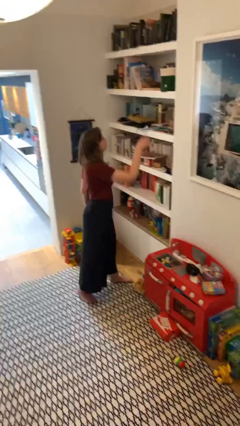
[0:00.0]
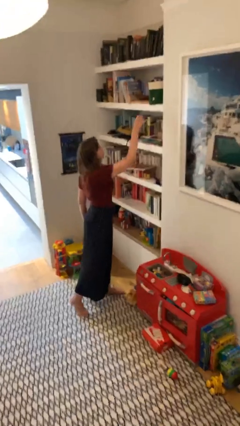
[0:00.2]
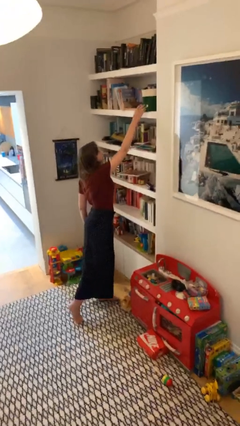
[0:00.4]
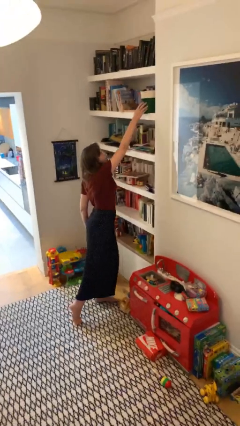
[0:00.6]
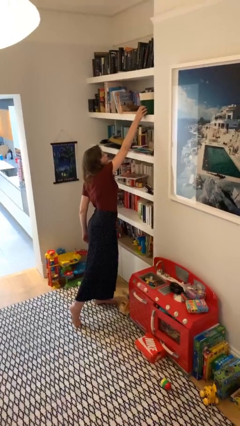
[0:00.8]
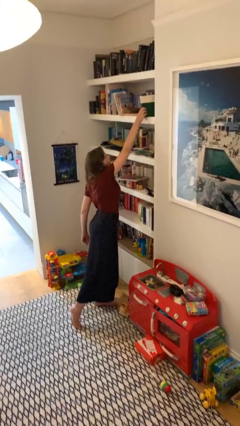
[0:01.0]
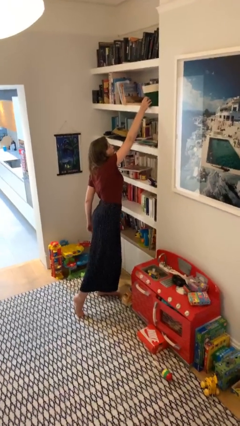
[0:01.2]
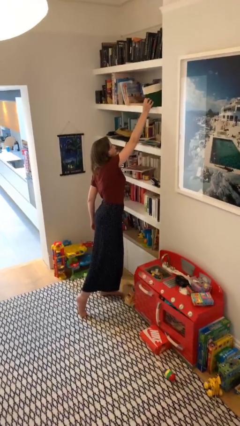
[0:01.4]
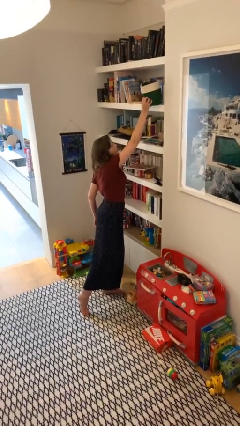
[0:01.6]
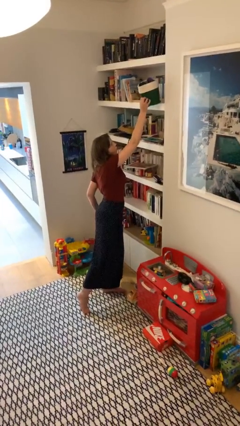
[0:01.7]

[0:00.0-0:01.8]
person picks up object from shelf

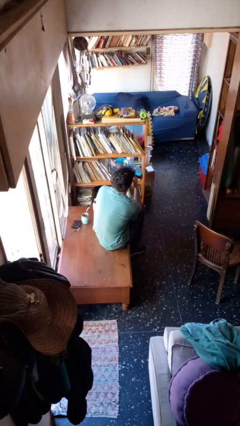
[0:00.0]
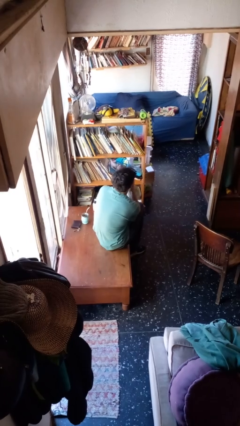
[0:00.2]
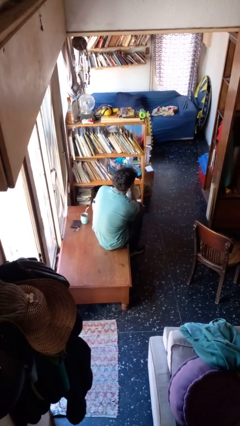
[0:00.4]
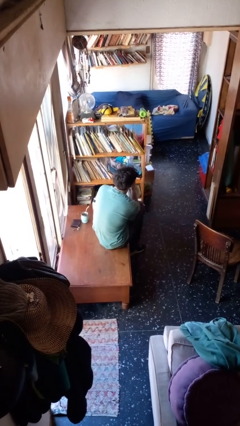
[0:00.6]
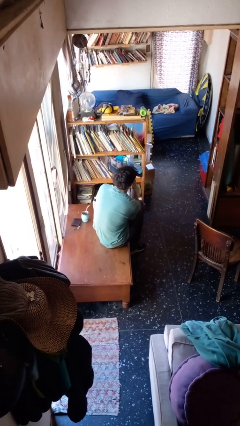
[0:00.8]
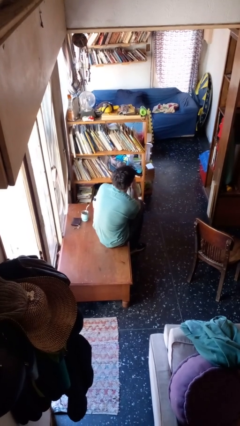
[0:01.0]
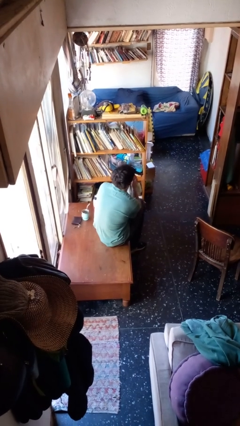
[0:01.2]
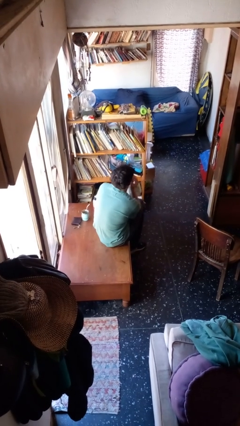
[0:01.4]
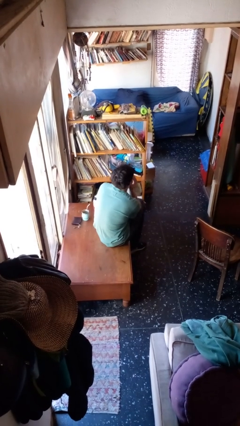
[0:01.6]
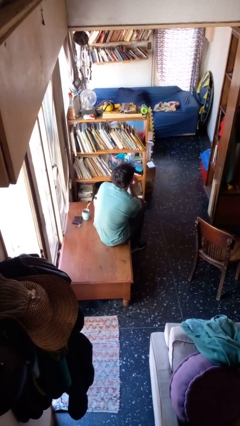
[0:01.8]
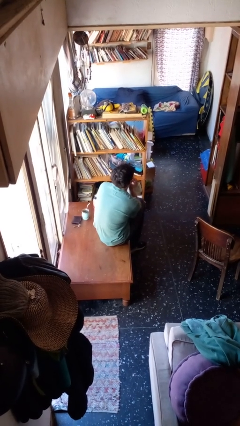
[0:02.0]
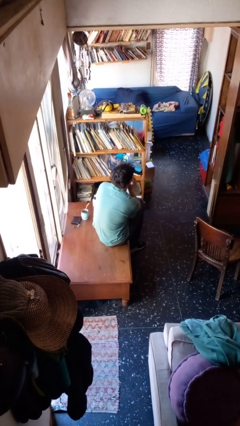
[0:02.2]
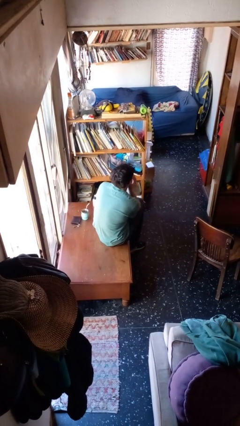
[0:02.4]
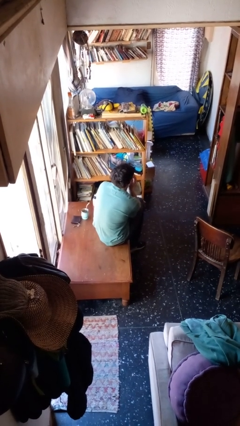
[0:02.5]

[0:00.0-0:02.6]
person strokes chin

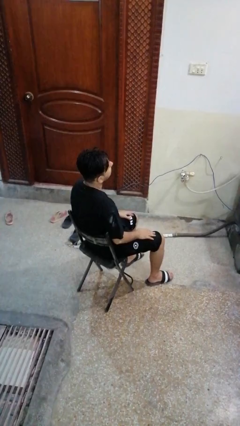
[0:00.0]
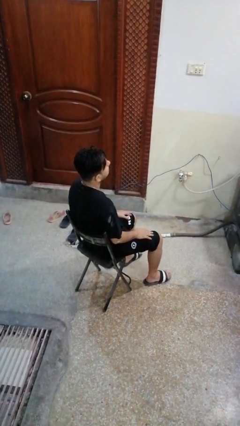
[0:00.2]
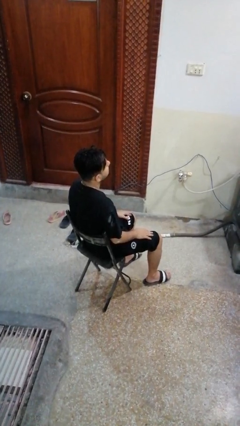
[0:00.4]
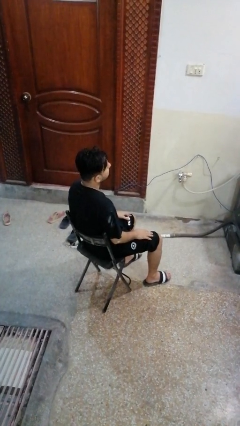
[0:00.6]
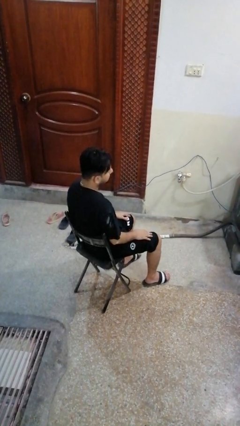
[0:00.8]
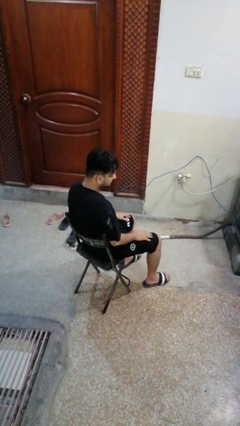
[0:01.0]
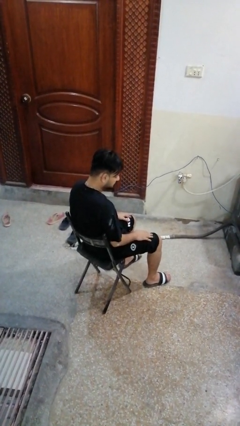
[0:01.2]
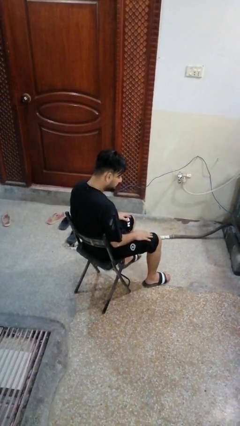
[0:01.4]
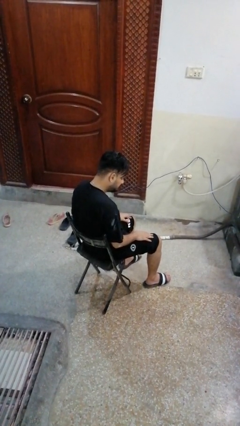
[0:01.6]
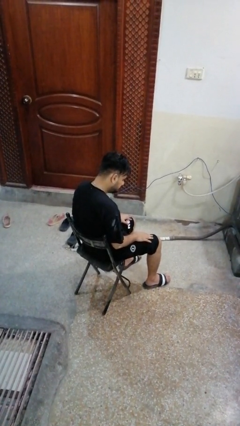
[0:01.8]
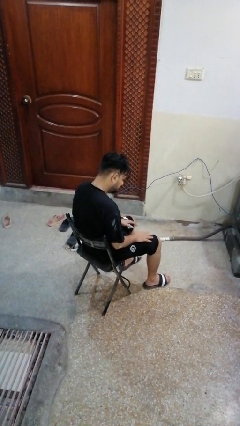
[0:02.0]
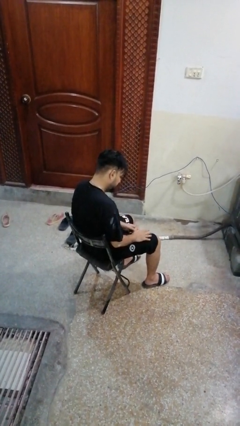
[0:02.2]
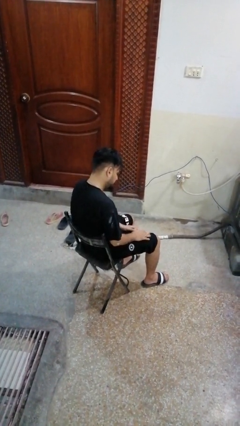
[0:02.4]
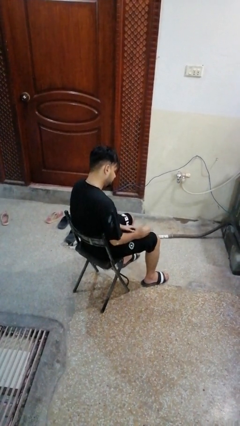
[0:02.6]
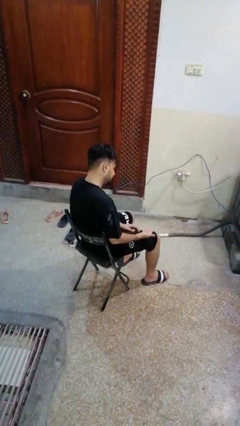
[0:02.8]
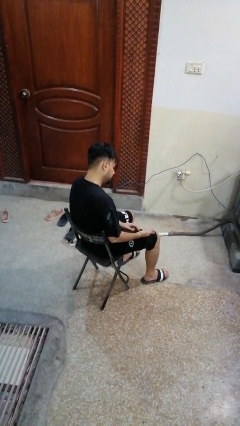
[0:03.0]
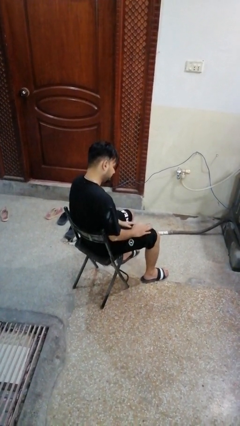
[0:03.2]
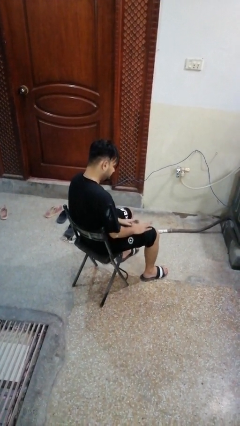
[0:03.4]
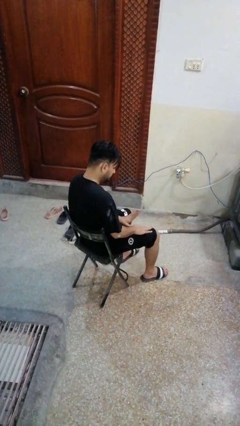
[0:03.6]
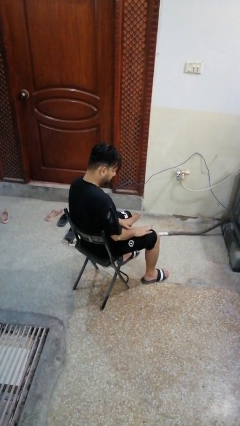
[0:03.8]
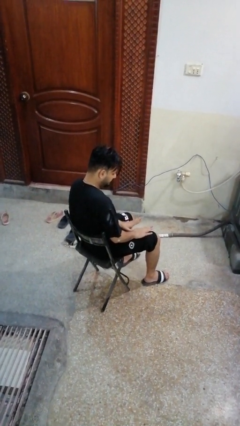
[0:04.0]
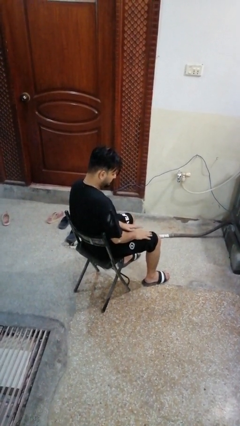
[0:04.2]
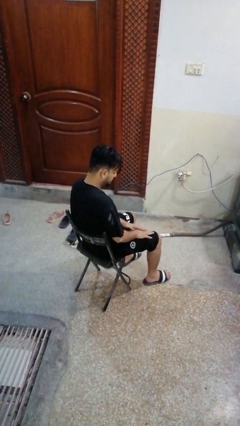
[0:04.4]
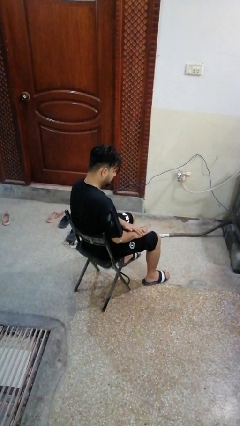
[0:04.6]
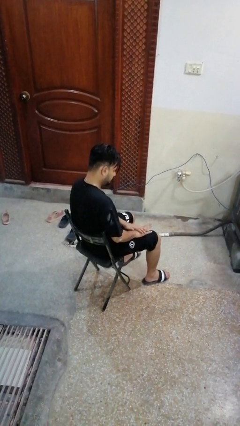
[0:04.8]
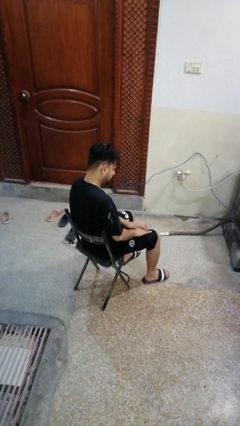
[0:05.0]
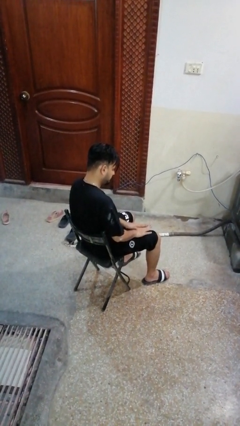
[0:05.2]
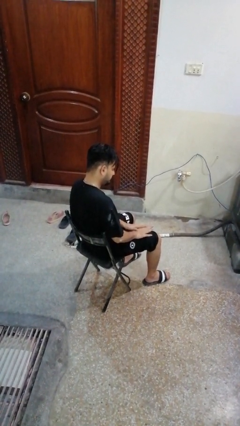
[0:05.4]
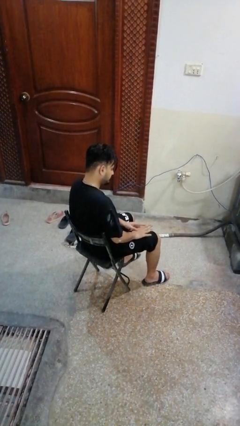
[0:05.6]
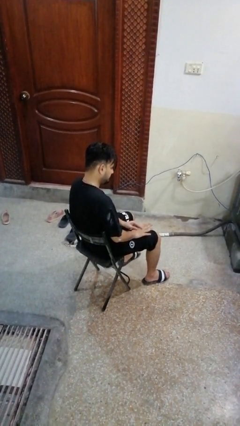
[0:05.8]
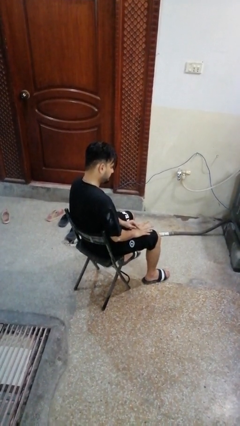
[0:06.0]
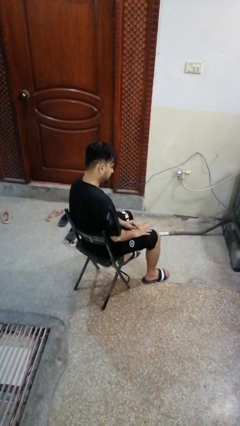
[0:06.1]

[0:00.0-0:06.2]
person looks at hands in lap

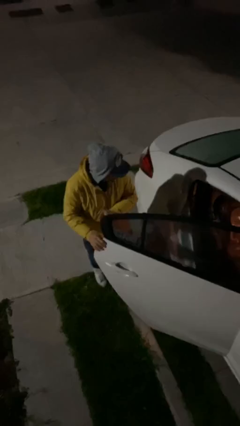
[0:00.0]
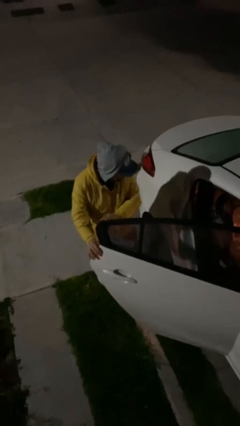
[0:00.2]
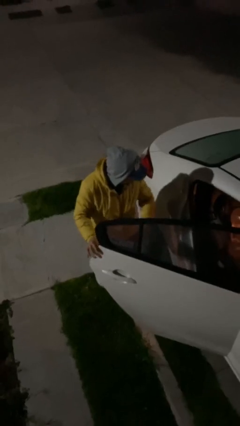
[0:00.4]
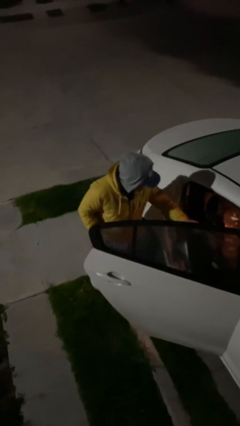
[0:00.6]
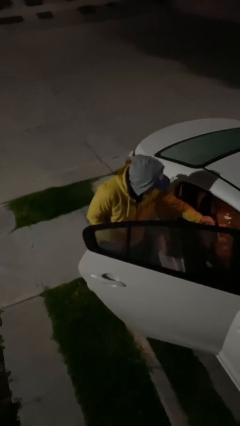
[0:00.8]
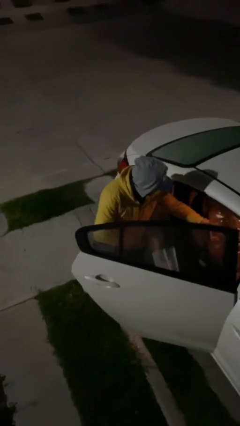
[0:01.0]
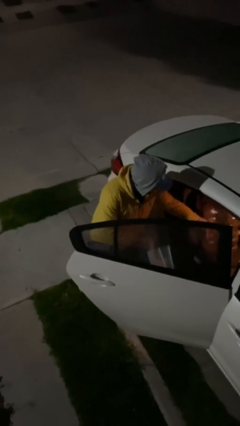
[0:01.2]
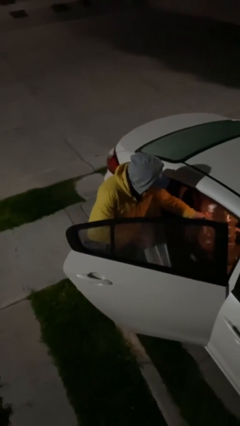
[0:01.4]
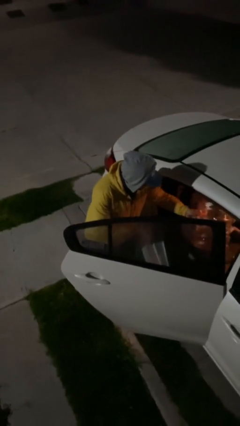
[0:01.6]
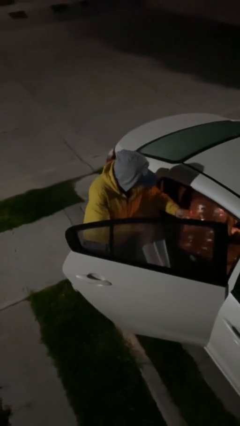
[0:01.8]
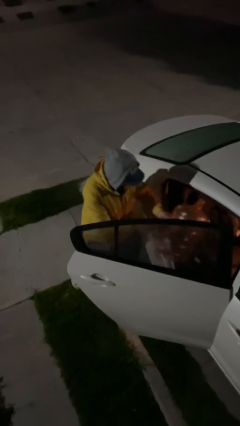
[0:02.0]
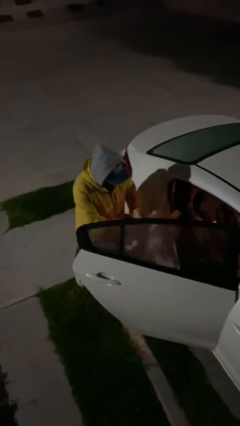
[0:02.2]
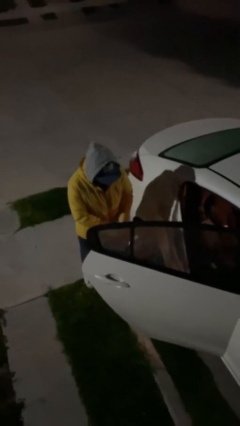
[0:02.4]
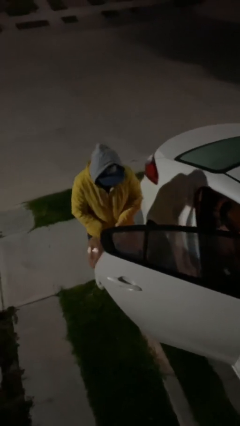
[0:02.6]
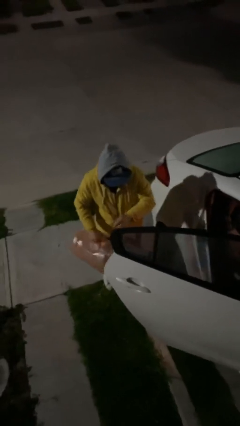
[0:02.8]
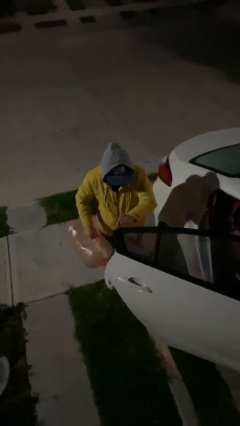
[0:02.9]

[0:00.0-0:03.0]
person unloads car

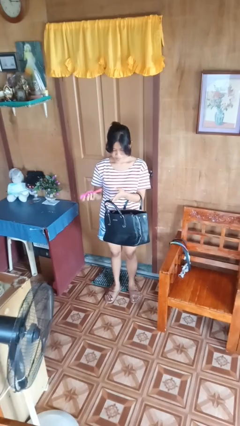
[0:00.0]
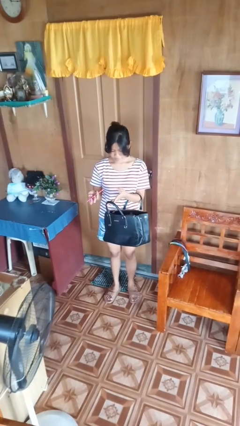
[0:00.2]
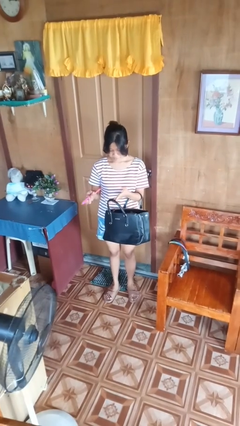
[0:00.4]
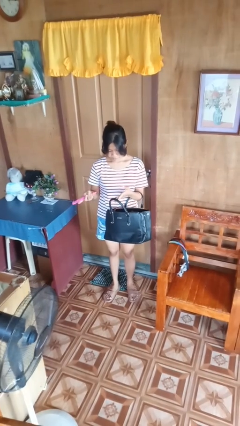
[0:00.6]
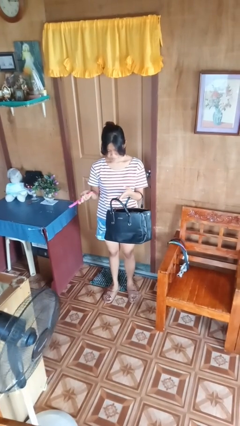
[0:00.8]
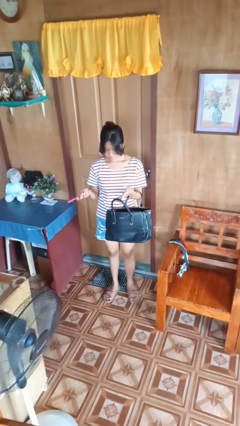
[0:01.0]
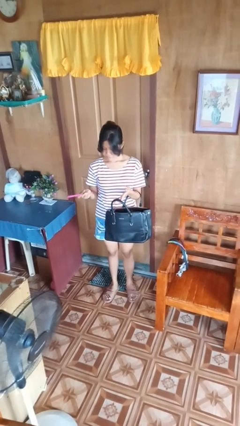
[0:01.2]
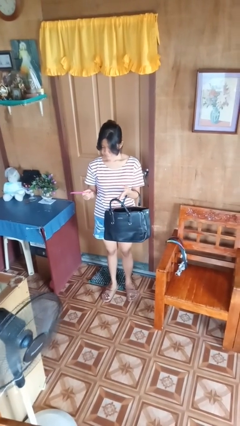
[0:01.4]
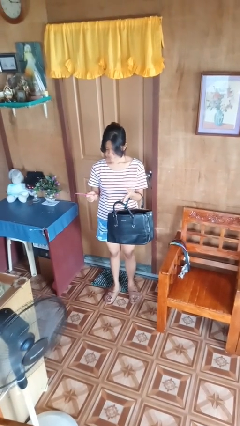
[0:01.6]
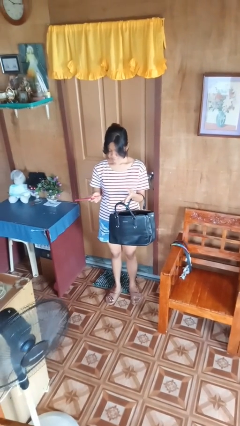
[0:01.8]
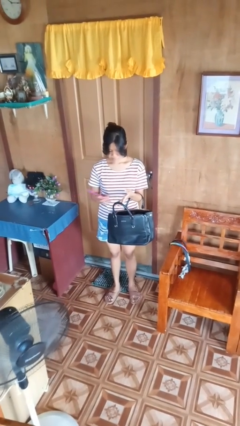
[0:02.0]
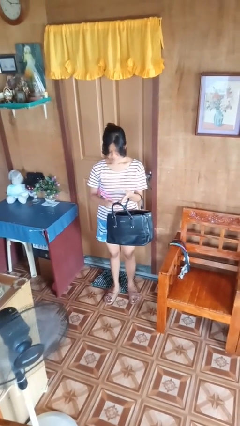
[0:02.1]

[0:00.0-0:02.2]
person takes object from purse

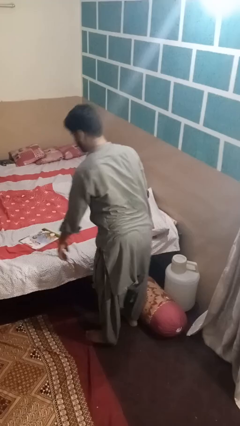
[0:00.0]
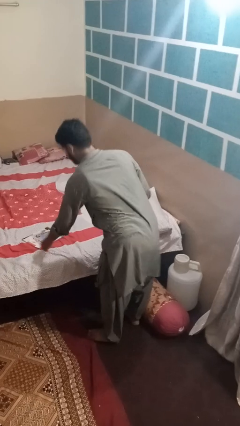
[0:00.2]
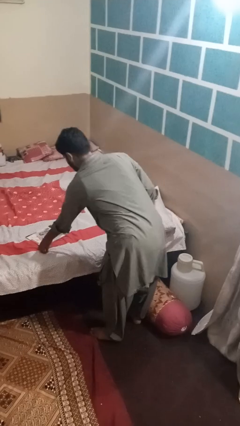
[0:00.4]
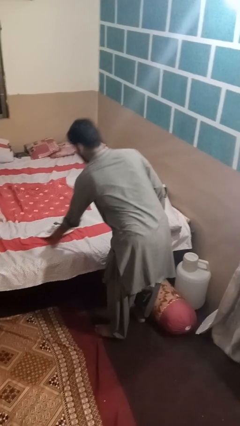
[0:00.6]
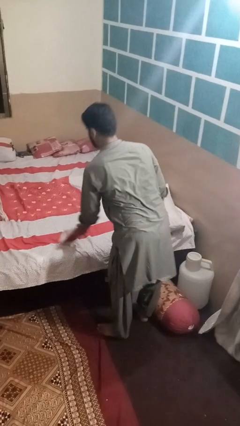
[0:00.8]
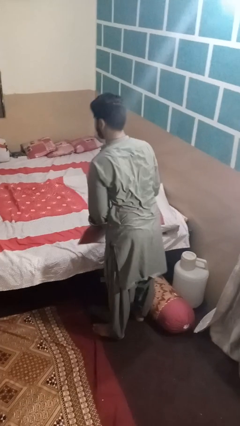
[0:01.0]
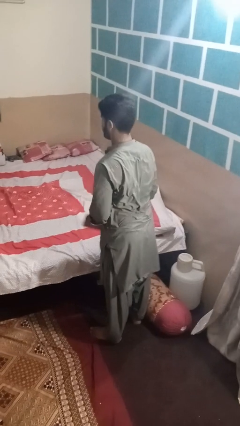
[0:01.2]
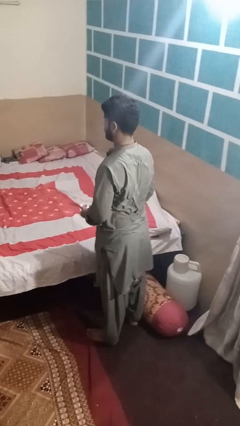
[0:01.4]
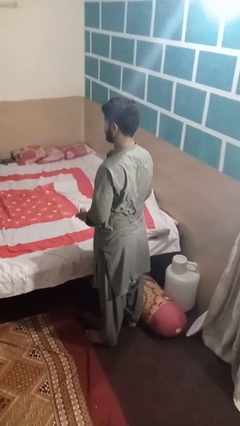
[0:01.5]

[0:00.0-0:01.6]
person picks up object from bed
